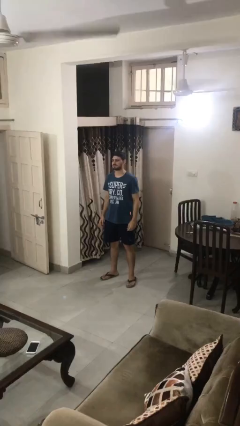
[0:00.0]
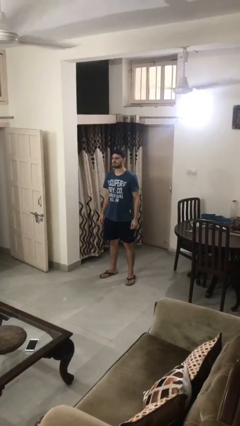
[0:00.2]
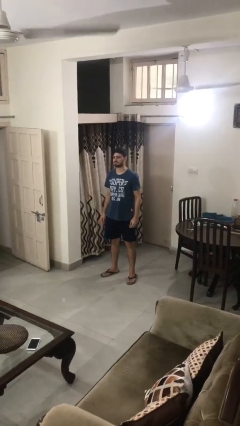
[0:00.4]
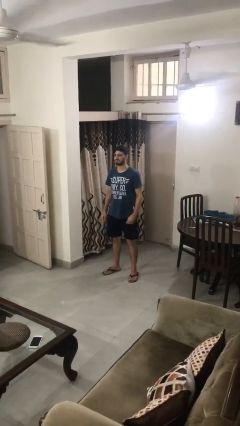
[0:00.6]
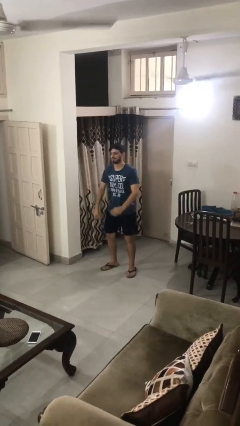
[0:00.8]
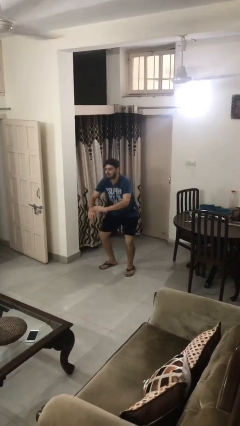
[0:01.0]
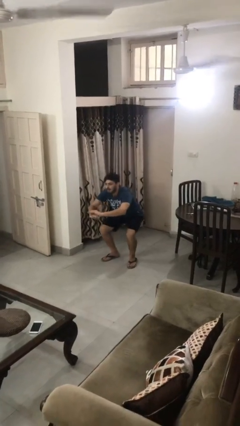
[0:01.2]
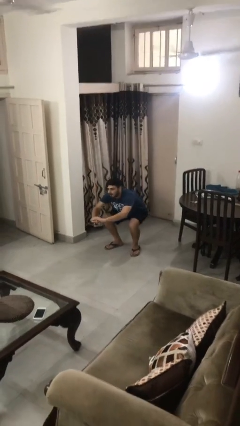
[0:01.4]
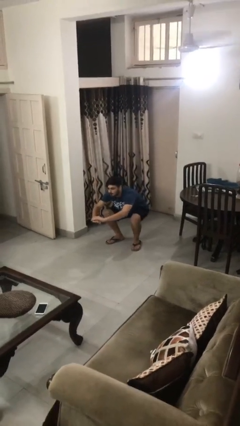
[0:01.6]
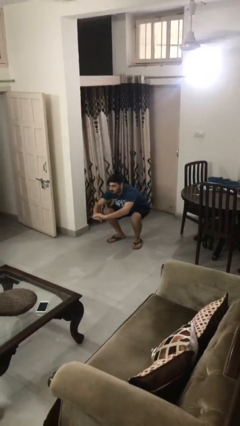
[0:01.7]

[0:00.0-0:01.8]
person squats

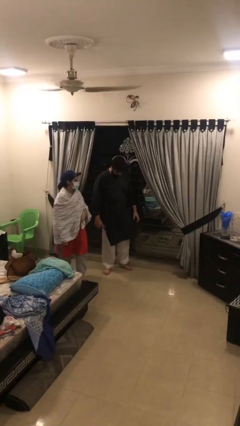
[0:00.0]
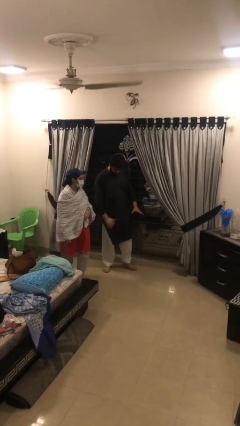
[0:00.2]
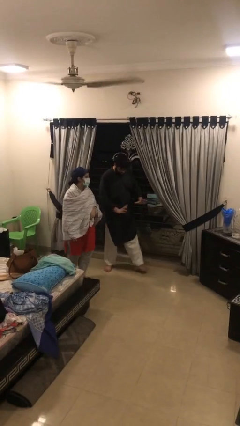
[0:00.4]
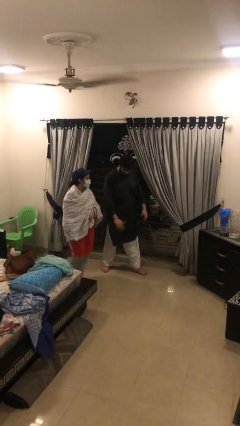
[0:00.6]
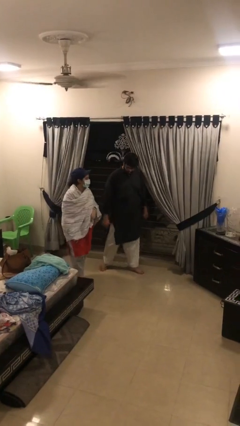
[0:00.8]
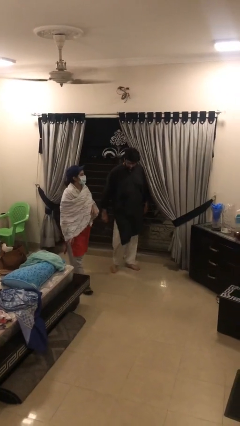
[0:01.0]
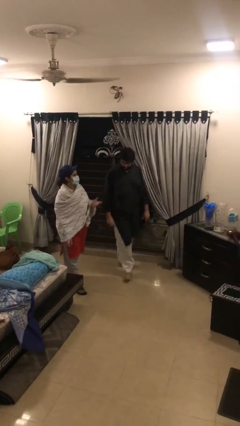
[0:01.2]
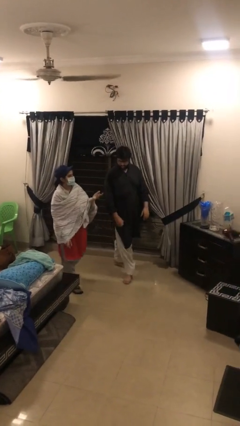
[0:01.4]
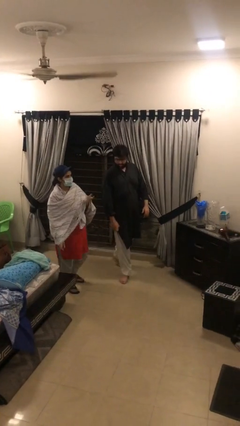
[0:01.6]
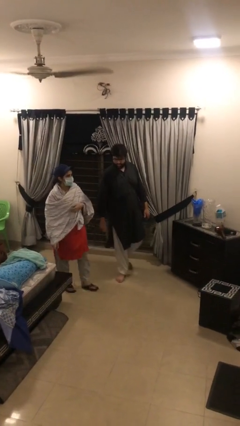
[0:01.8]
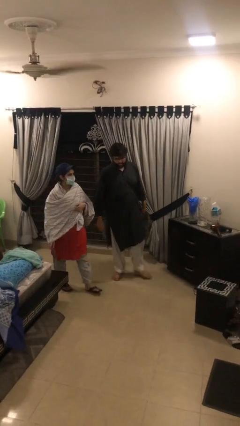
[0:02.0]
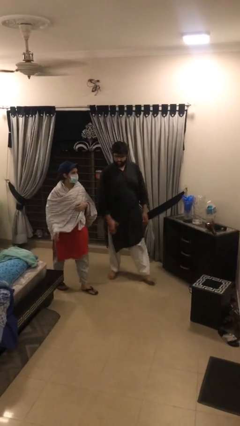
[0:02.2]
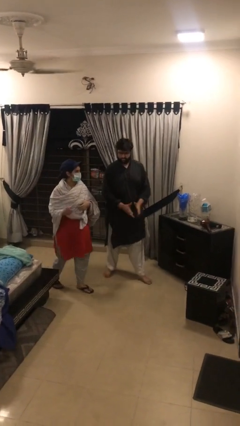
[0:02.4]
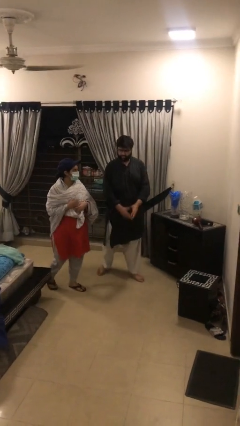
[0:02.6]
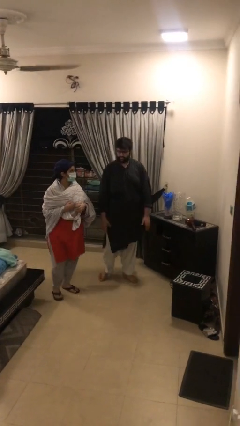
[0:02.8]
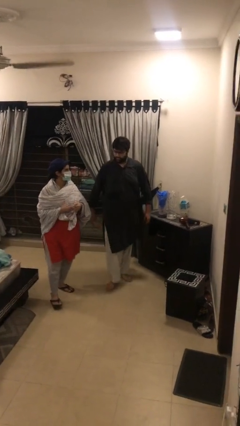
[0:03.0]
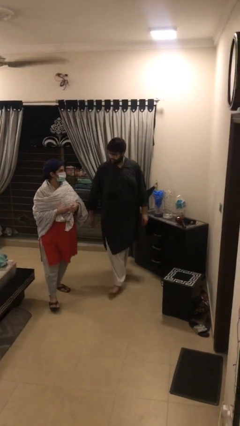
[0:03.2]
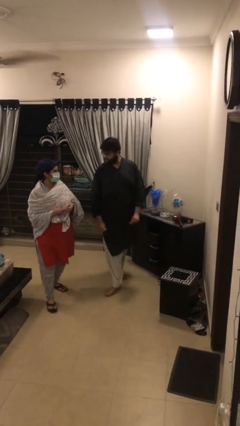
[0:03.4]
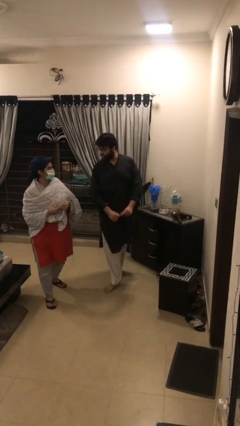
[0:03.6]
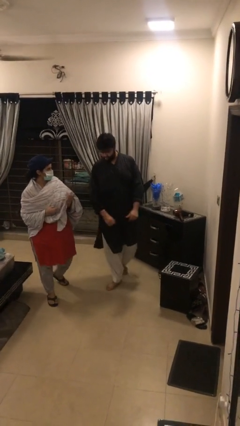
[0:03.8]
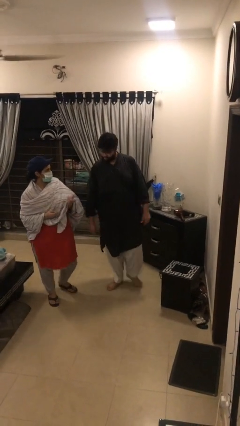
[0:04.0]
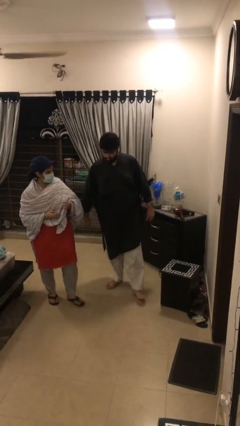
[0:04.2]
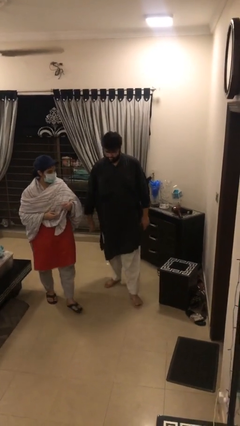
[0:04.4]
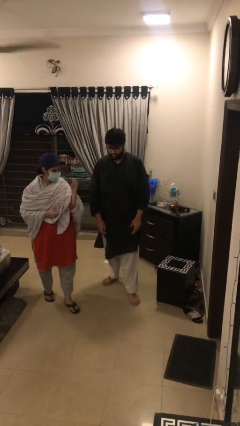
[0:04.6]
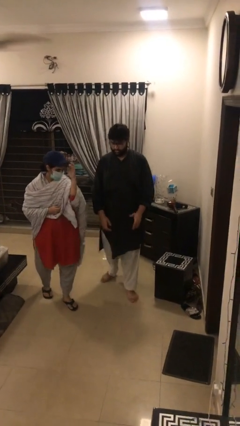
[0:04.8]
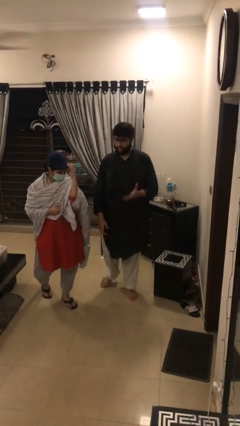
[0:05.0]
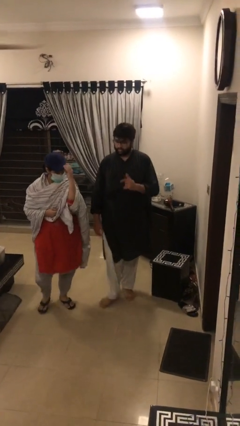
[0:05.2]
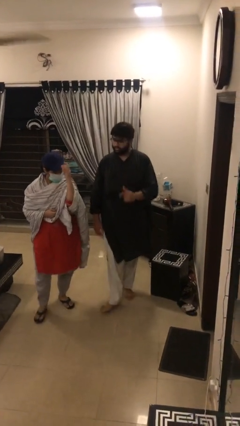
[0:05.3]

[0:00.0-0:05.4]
person talks to person

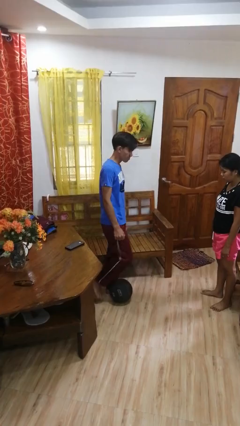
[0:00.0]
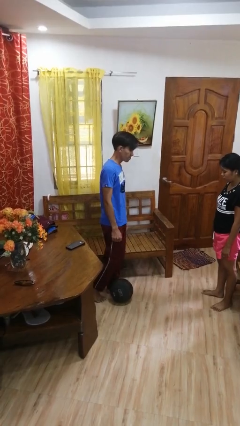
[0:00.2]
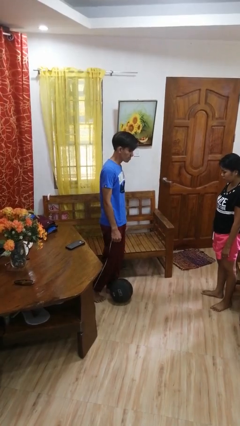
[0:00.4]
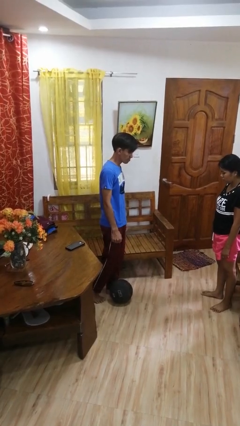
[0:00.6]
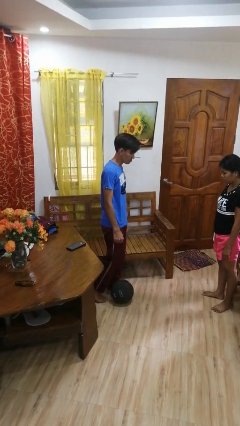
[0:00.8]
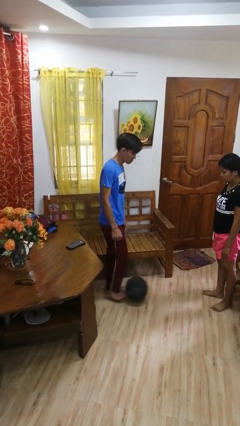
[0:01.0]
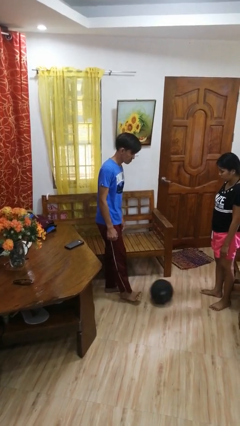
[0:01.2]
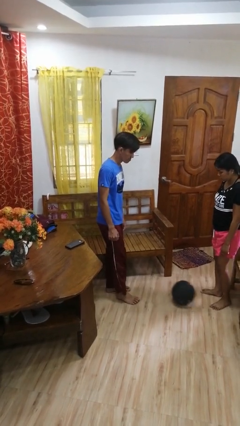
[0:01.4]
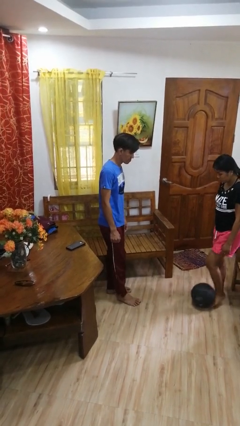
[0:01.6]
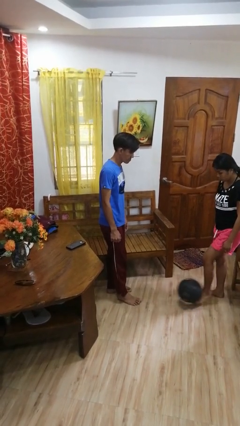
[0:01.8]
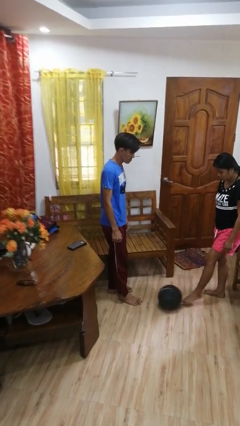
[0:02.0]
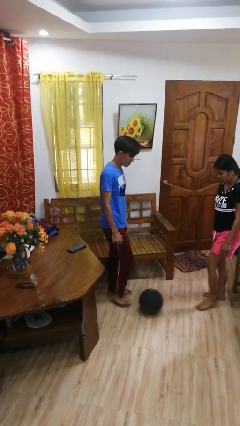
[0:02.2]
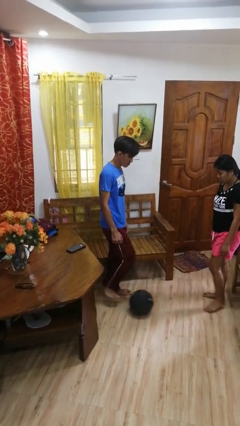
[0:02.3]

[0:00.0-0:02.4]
person kicks object to person

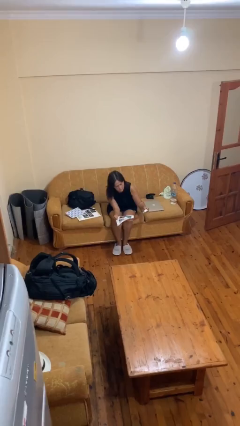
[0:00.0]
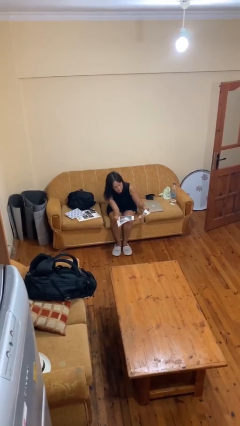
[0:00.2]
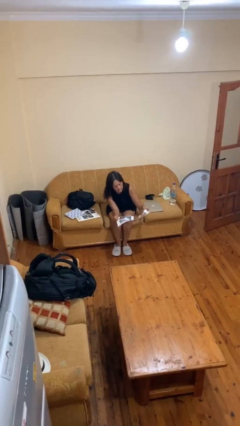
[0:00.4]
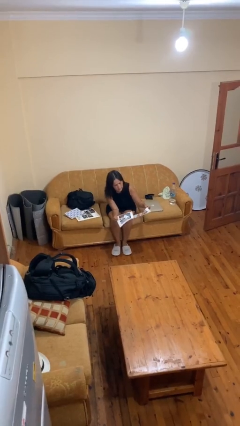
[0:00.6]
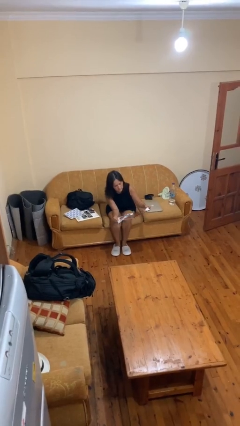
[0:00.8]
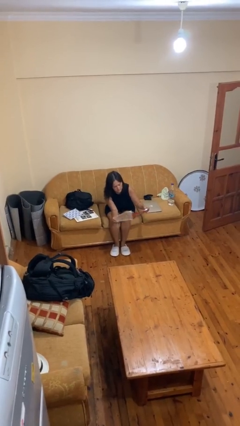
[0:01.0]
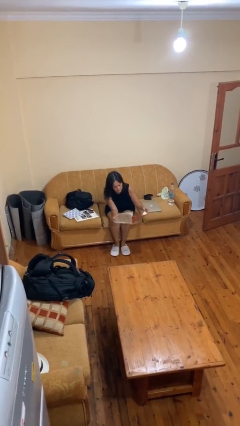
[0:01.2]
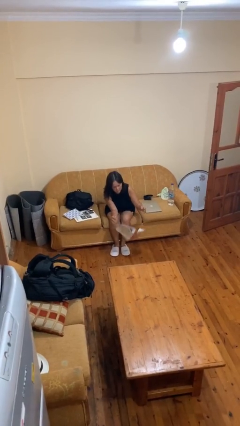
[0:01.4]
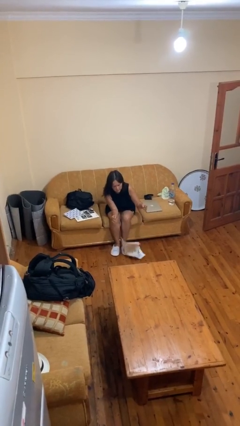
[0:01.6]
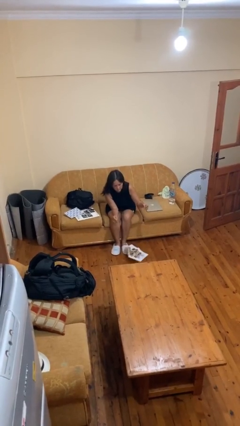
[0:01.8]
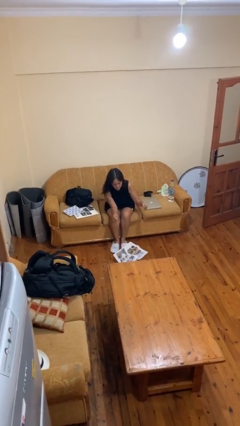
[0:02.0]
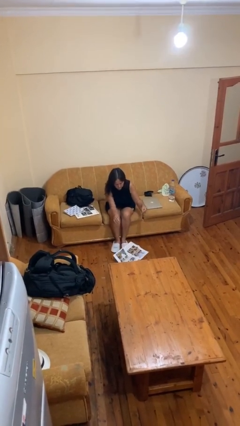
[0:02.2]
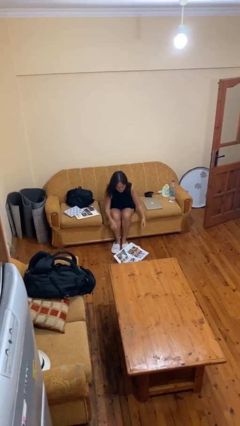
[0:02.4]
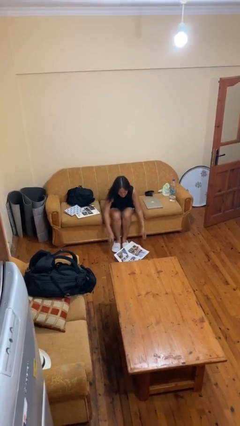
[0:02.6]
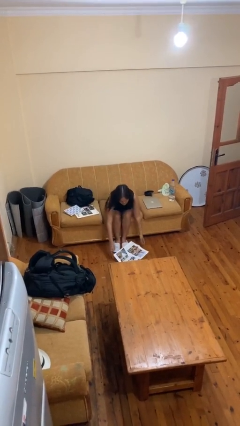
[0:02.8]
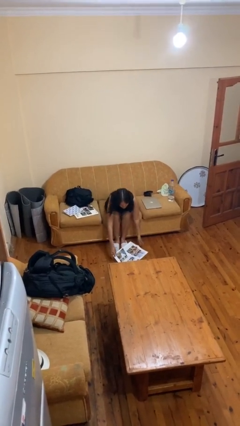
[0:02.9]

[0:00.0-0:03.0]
person drops object

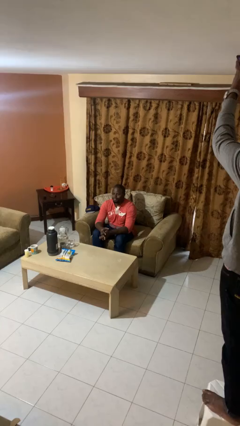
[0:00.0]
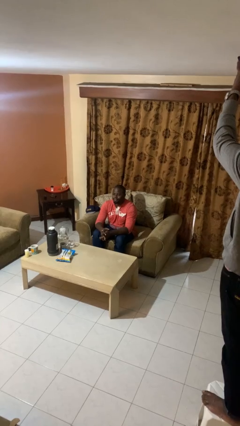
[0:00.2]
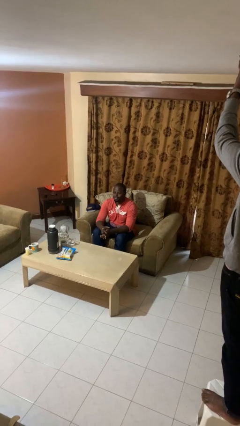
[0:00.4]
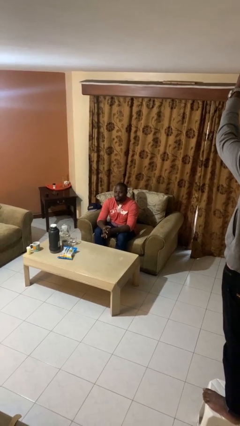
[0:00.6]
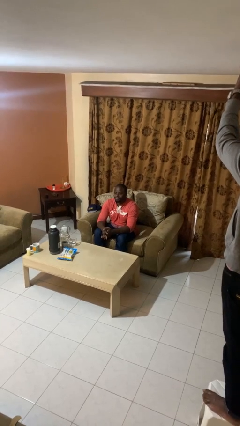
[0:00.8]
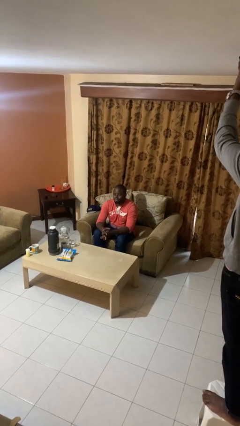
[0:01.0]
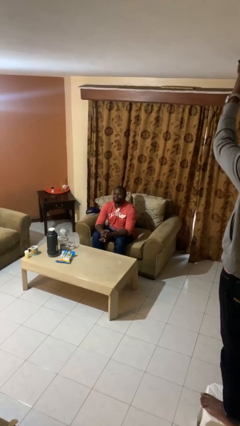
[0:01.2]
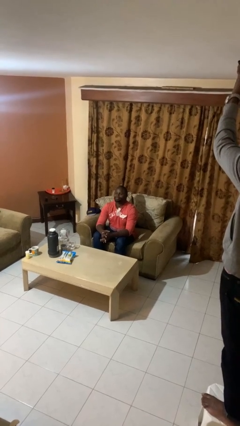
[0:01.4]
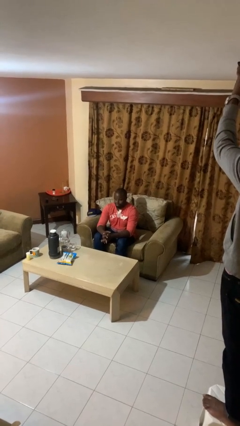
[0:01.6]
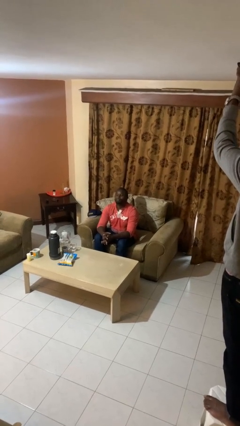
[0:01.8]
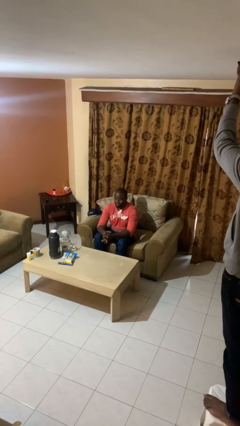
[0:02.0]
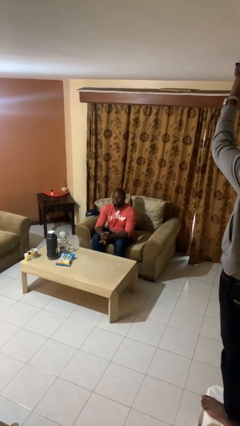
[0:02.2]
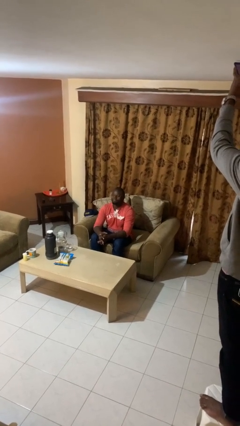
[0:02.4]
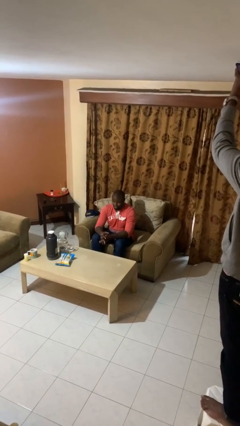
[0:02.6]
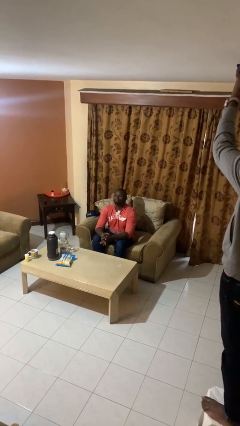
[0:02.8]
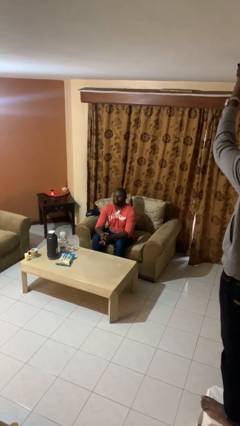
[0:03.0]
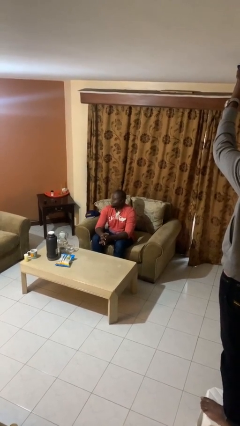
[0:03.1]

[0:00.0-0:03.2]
person nods head

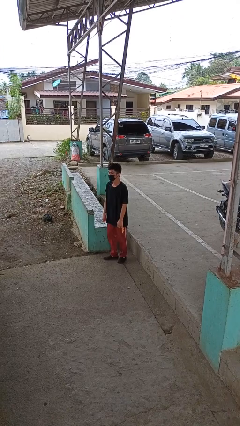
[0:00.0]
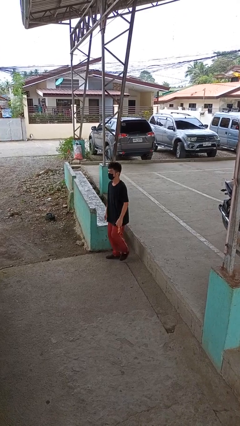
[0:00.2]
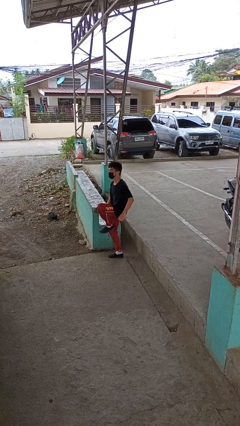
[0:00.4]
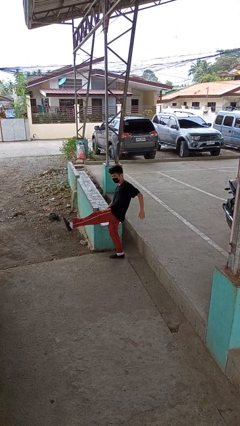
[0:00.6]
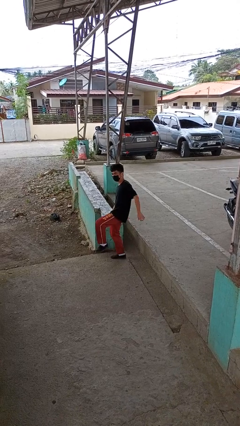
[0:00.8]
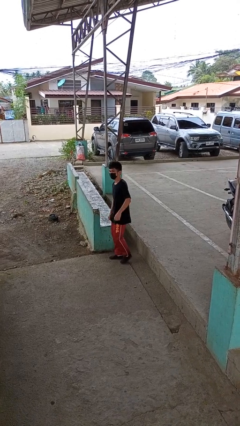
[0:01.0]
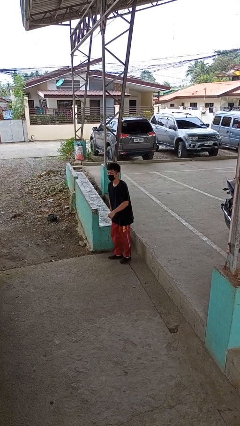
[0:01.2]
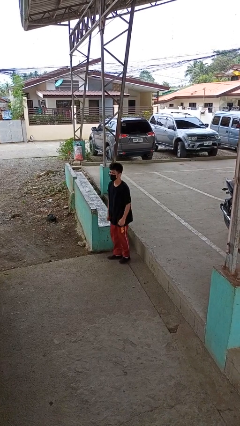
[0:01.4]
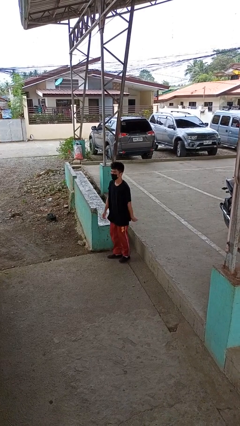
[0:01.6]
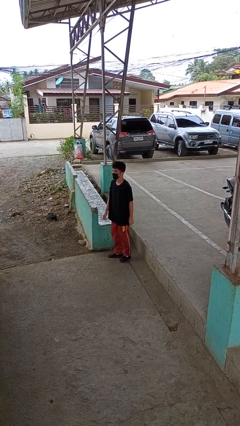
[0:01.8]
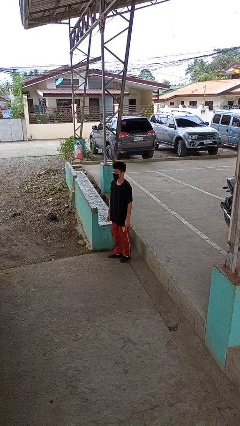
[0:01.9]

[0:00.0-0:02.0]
person karate kicks
